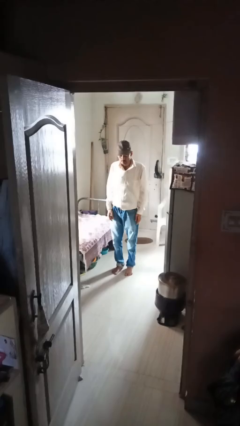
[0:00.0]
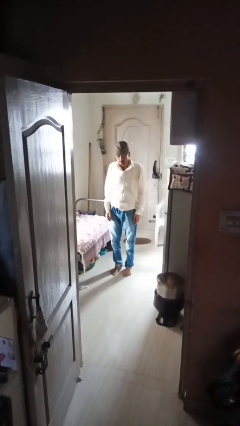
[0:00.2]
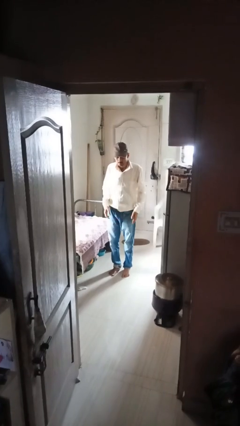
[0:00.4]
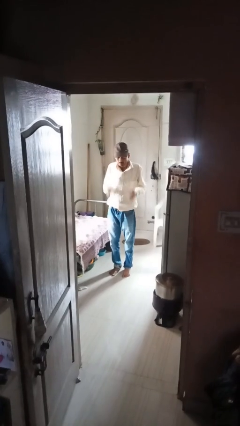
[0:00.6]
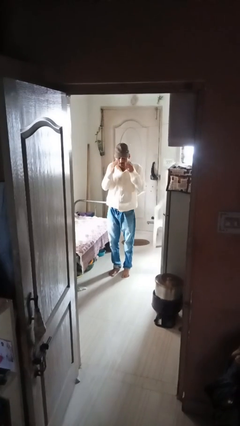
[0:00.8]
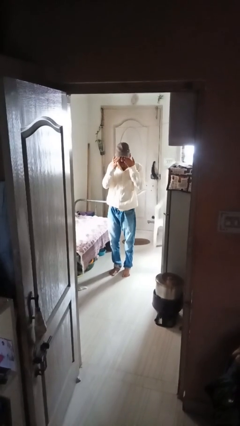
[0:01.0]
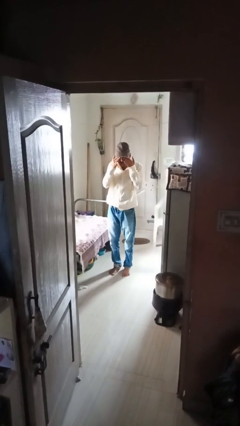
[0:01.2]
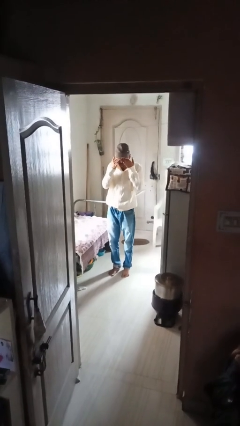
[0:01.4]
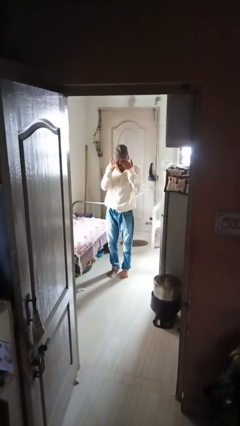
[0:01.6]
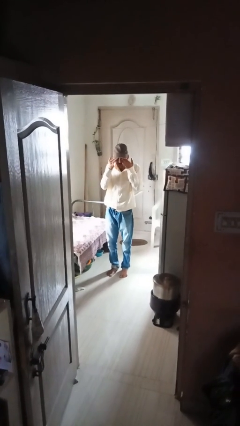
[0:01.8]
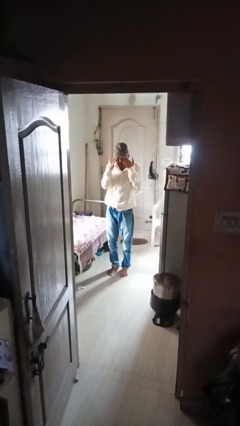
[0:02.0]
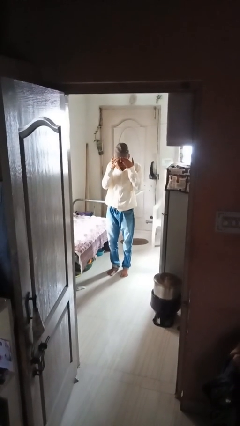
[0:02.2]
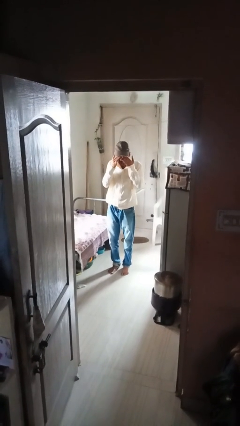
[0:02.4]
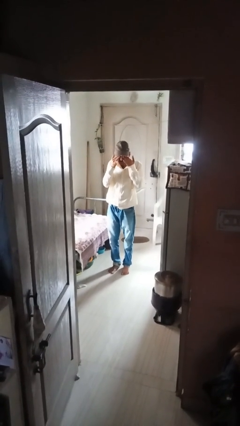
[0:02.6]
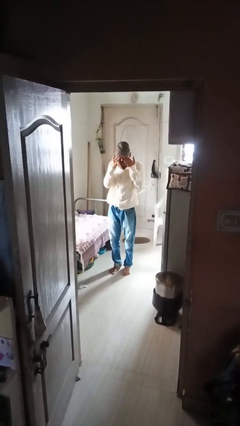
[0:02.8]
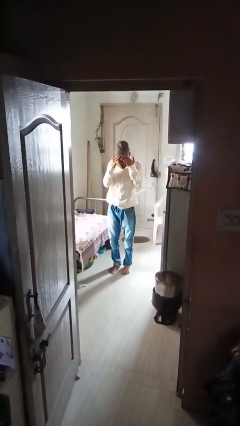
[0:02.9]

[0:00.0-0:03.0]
person rubs eyes

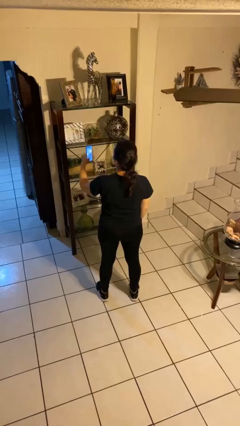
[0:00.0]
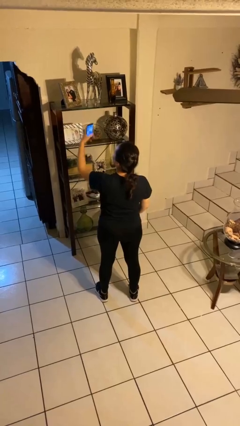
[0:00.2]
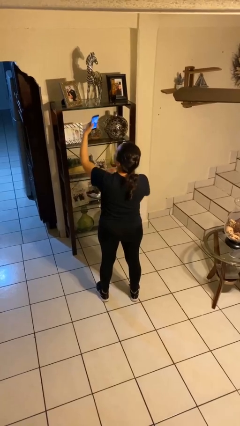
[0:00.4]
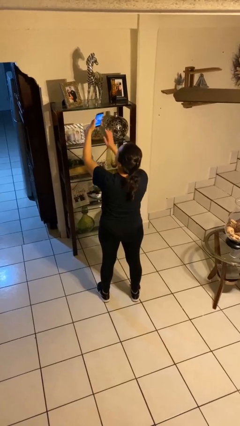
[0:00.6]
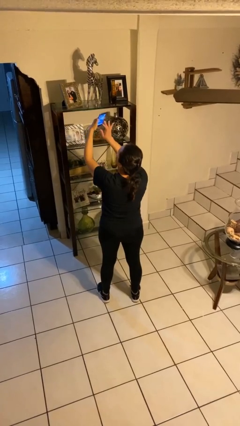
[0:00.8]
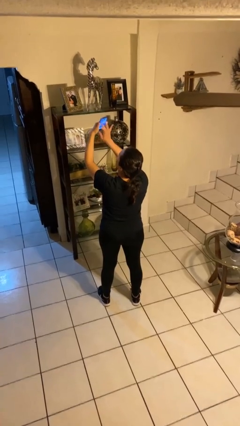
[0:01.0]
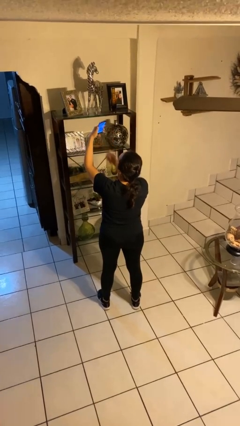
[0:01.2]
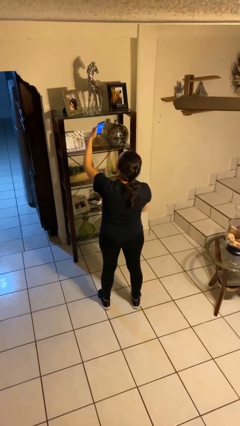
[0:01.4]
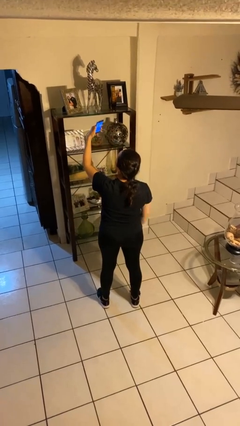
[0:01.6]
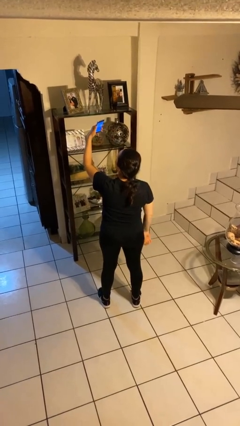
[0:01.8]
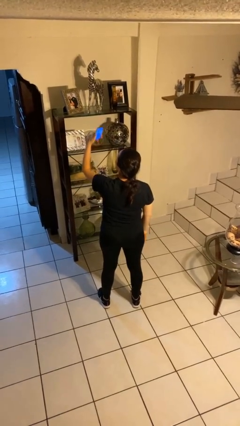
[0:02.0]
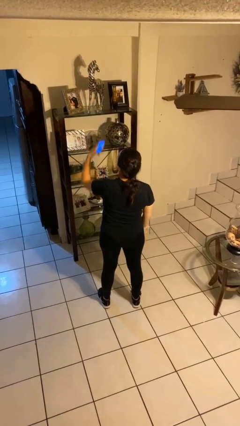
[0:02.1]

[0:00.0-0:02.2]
person takes selfie

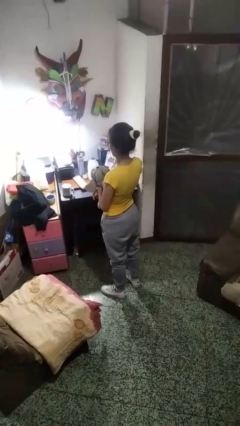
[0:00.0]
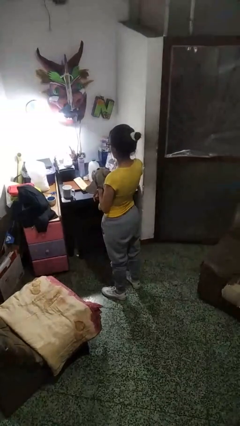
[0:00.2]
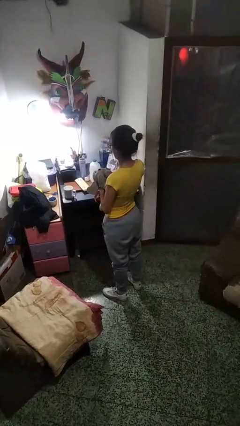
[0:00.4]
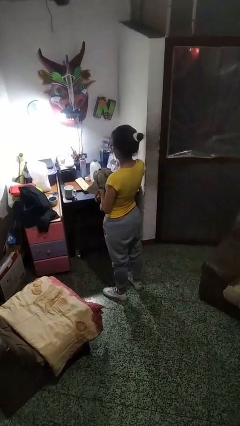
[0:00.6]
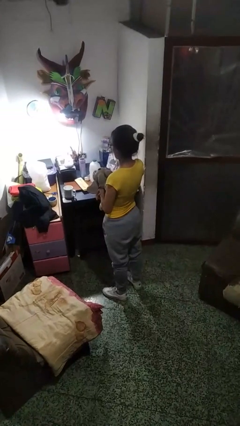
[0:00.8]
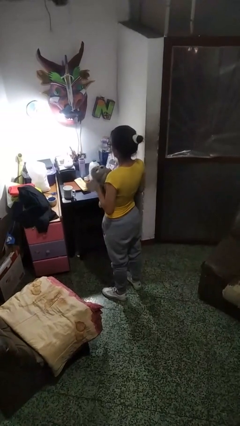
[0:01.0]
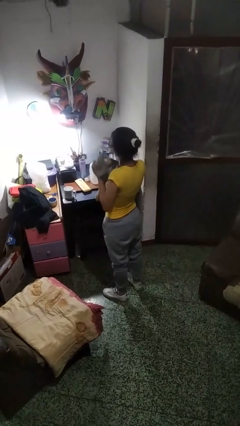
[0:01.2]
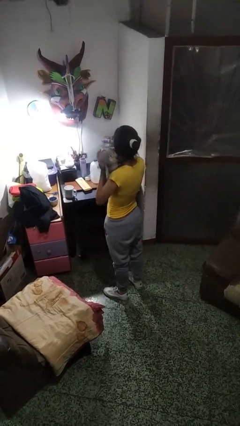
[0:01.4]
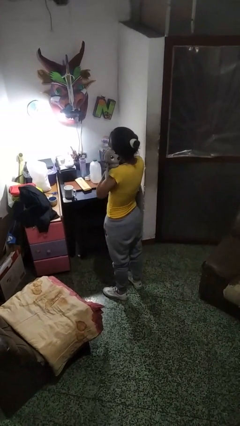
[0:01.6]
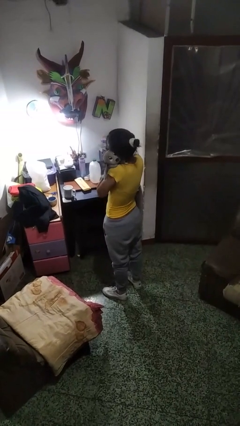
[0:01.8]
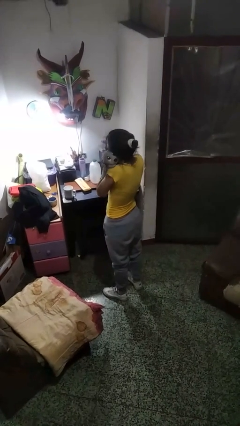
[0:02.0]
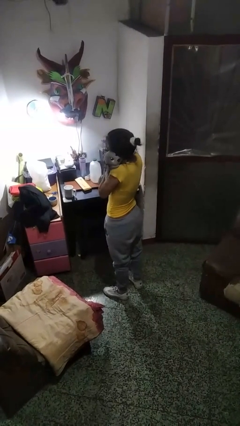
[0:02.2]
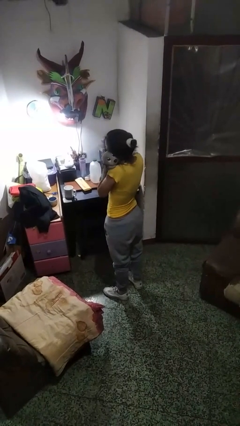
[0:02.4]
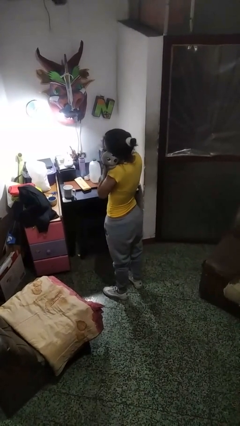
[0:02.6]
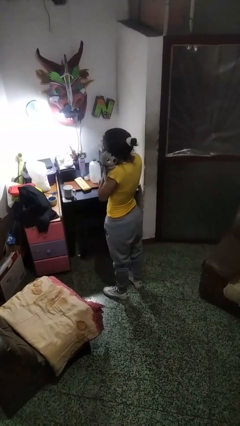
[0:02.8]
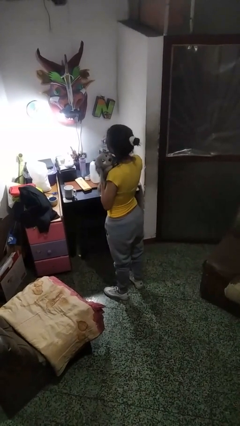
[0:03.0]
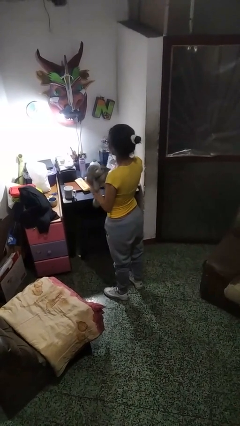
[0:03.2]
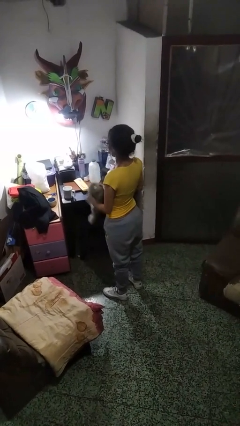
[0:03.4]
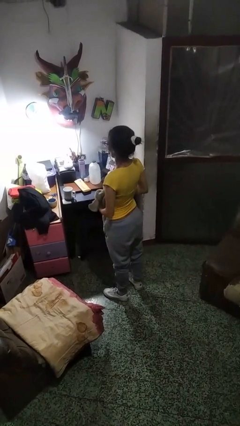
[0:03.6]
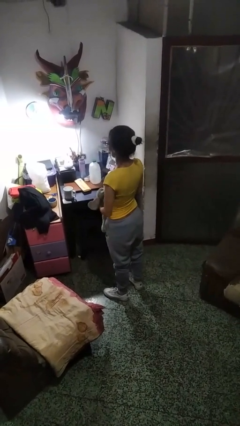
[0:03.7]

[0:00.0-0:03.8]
person hugs stuffed animal

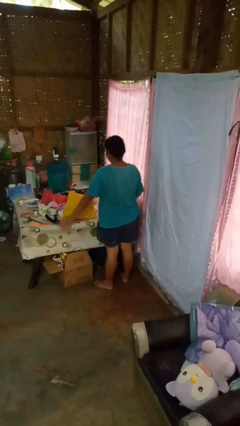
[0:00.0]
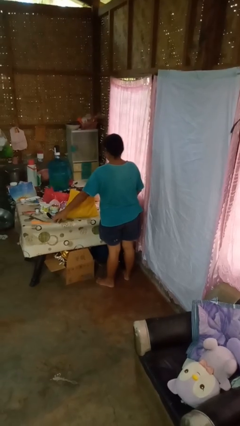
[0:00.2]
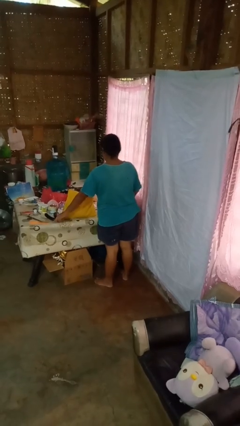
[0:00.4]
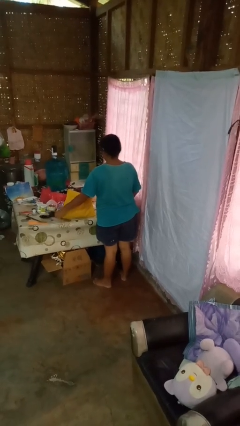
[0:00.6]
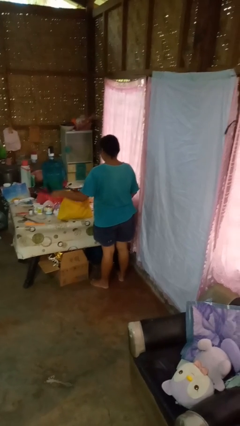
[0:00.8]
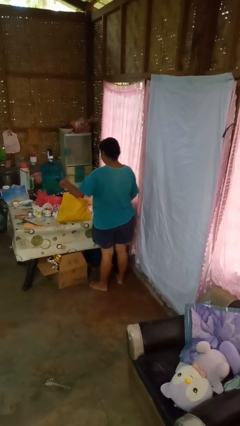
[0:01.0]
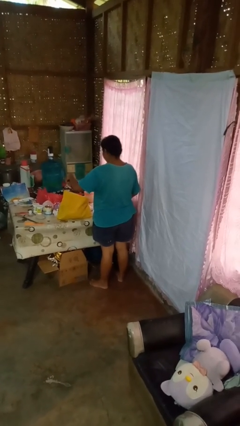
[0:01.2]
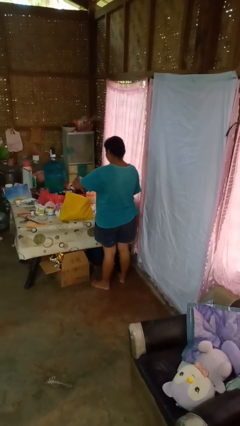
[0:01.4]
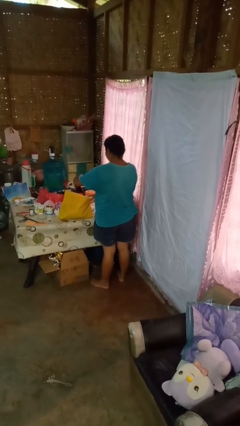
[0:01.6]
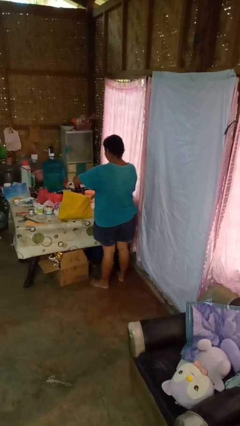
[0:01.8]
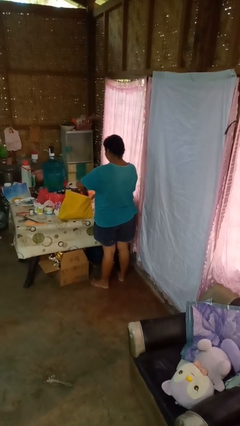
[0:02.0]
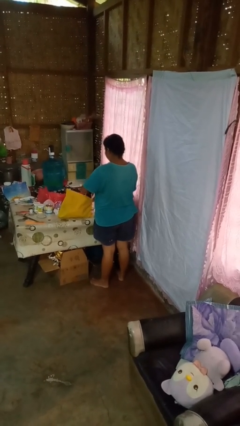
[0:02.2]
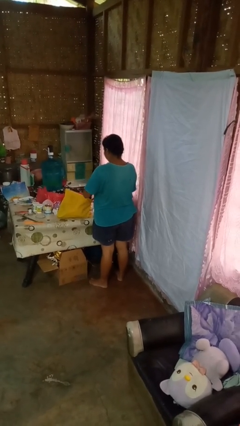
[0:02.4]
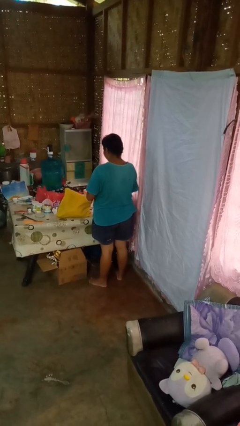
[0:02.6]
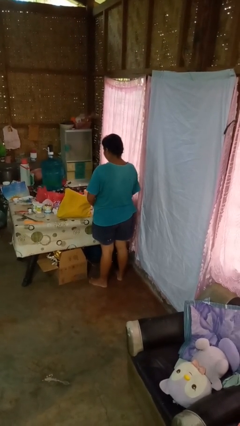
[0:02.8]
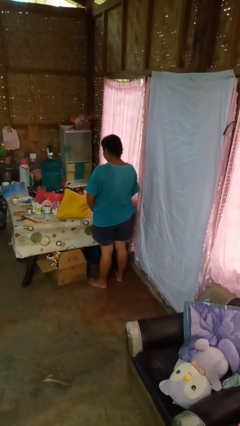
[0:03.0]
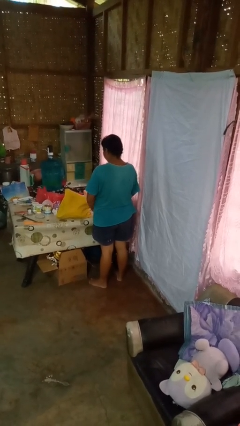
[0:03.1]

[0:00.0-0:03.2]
person puts object into bag

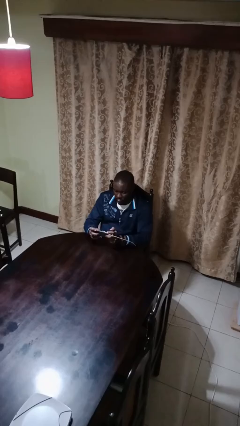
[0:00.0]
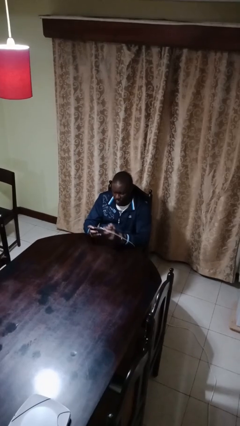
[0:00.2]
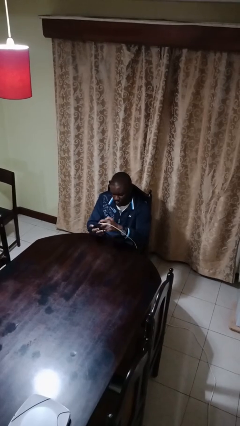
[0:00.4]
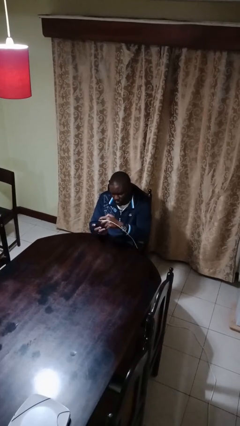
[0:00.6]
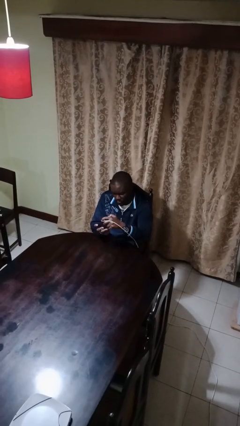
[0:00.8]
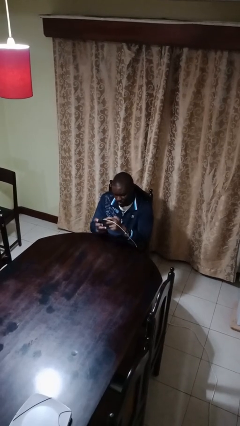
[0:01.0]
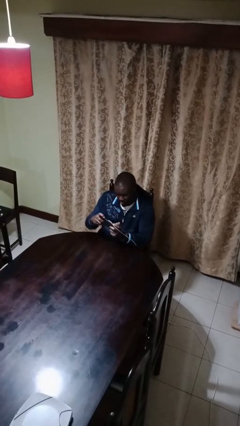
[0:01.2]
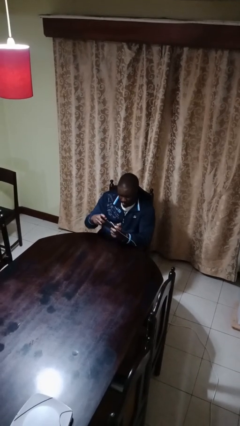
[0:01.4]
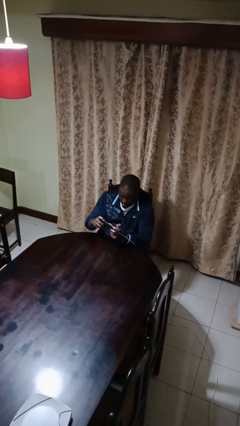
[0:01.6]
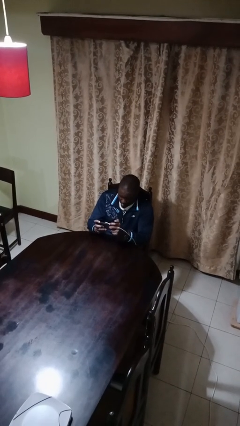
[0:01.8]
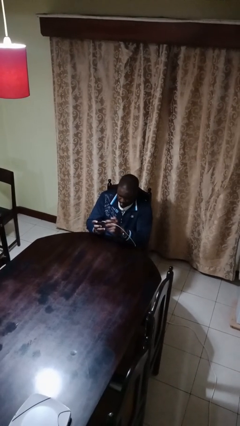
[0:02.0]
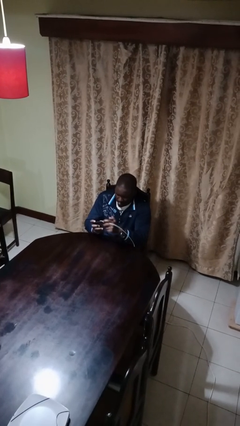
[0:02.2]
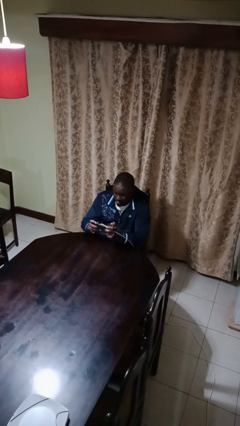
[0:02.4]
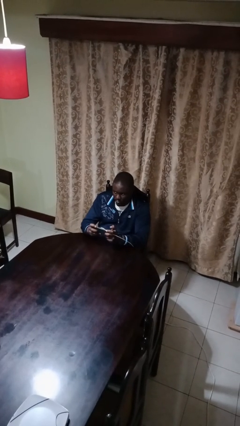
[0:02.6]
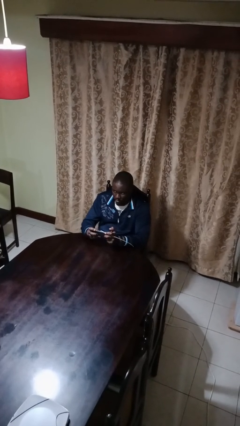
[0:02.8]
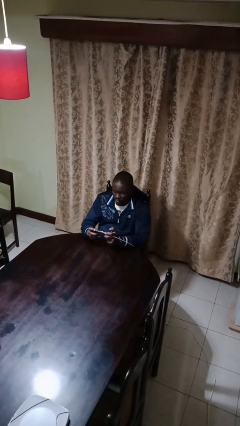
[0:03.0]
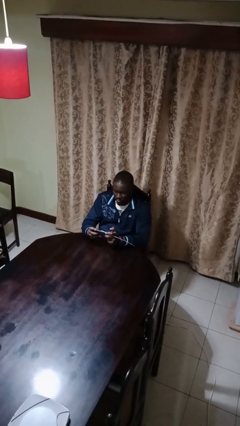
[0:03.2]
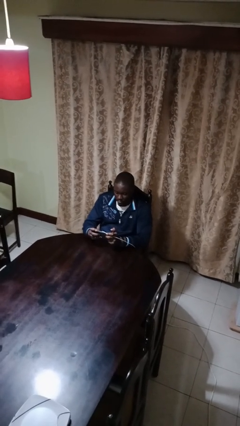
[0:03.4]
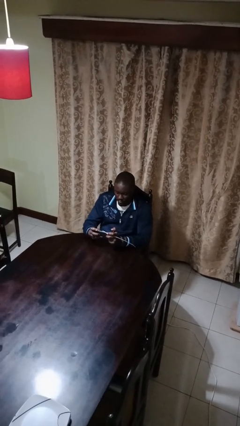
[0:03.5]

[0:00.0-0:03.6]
person interacts with handheld game

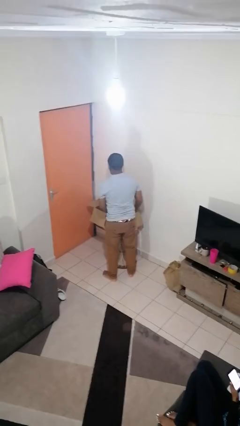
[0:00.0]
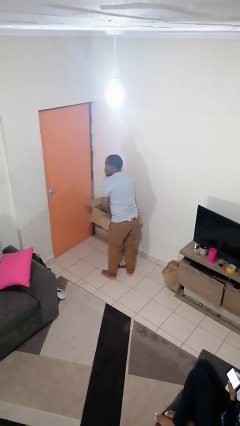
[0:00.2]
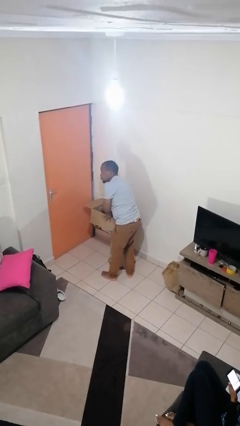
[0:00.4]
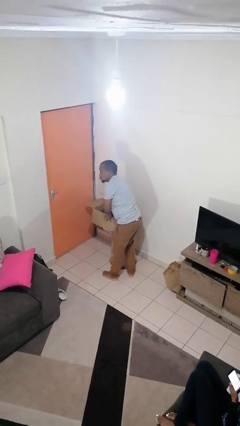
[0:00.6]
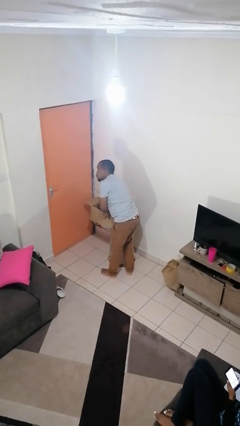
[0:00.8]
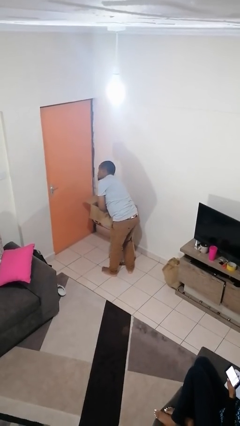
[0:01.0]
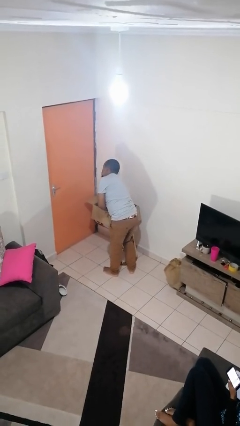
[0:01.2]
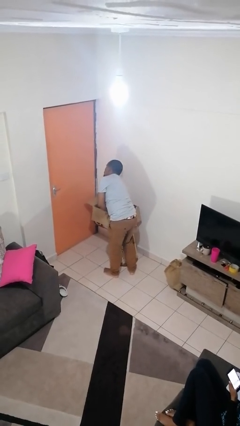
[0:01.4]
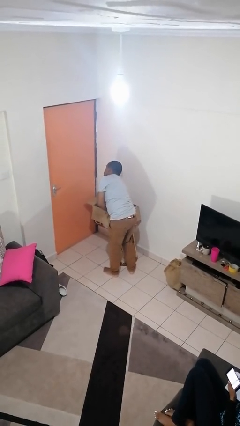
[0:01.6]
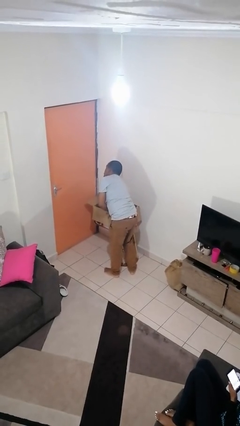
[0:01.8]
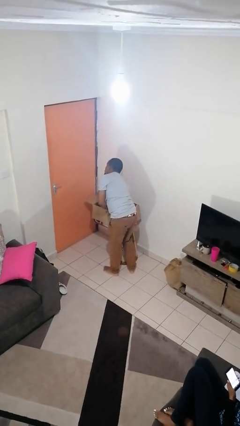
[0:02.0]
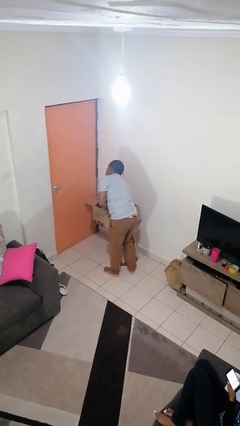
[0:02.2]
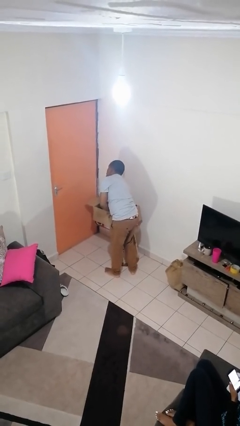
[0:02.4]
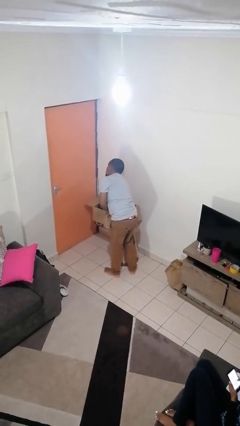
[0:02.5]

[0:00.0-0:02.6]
person searches in box
